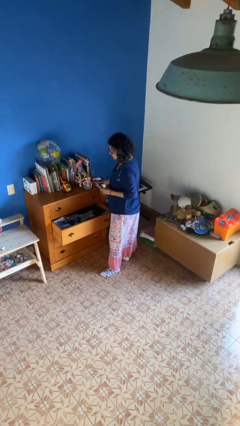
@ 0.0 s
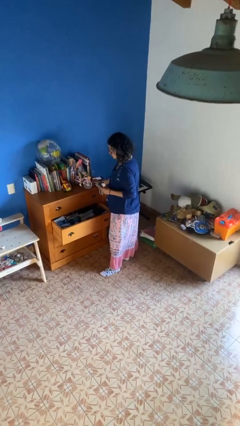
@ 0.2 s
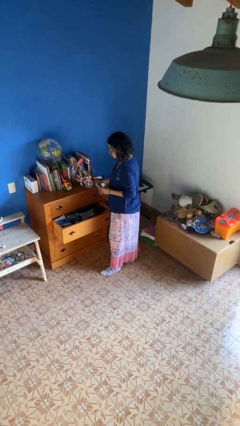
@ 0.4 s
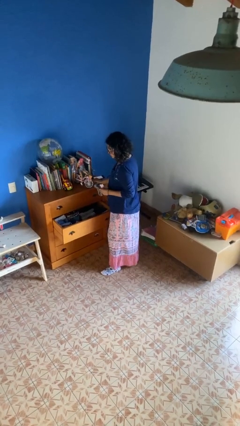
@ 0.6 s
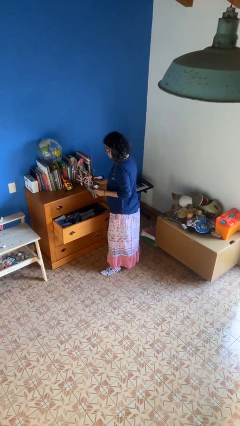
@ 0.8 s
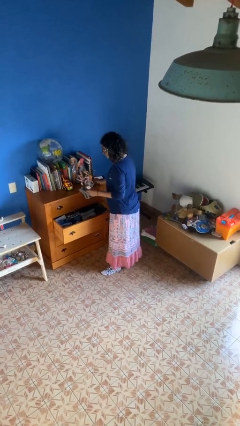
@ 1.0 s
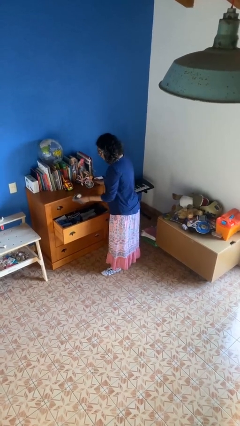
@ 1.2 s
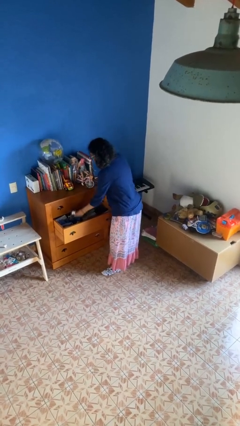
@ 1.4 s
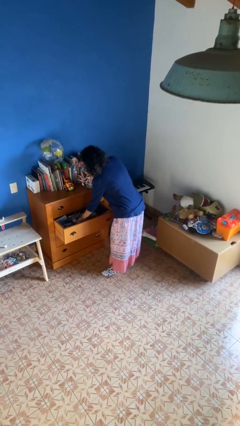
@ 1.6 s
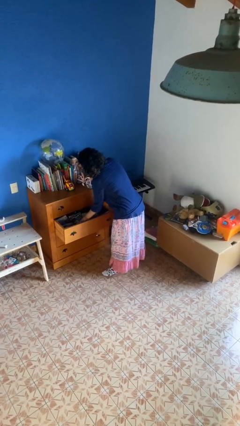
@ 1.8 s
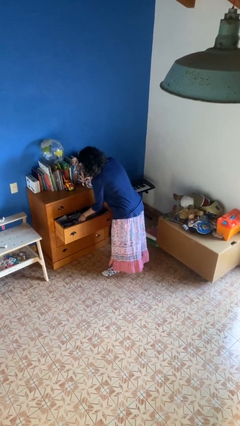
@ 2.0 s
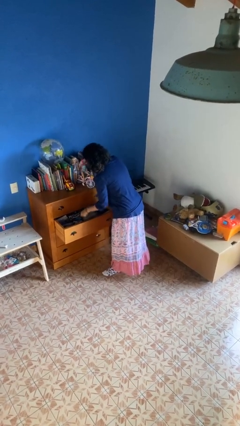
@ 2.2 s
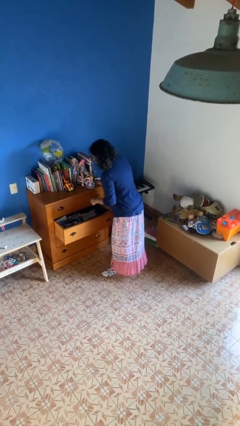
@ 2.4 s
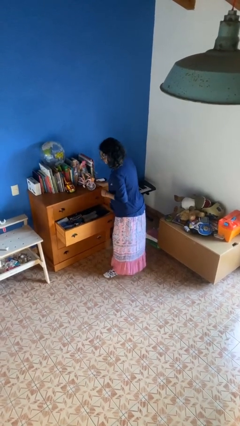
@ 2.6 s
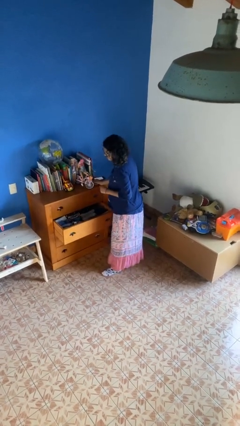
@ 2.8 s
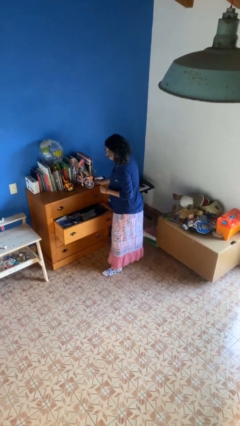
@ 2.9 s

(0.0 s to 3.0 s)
person puts clothes into dresser

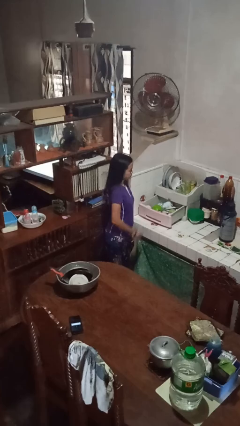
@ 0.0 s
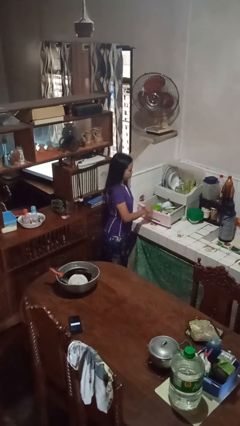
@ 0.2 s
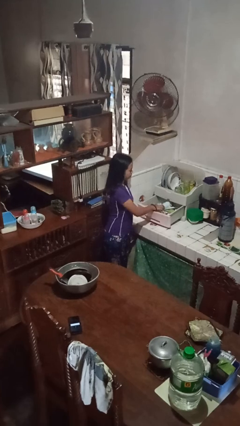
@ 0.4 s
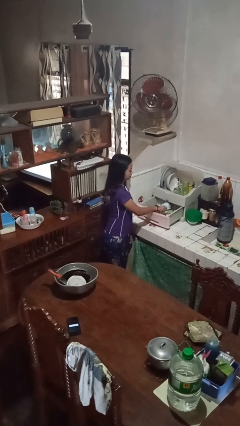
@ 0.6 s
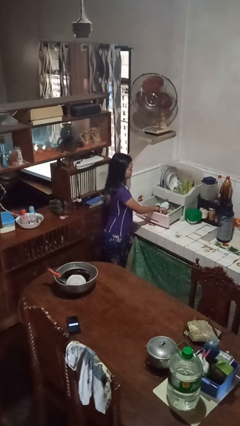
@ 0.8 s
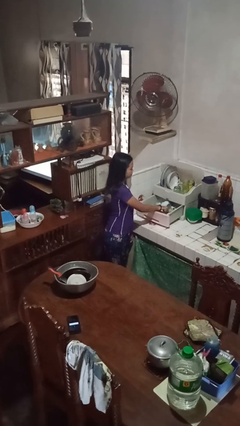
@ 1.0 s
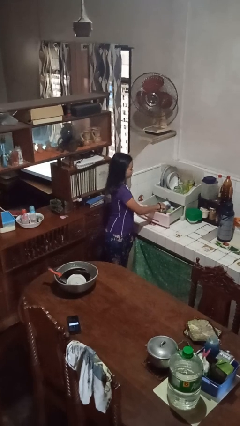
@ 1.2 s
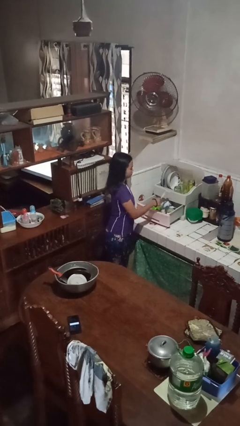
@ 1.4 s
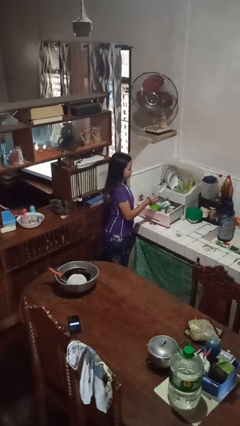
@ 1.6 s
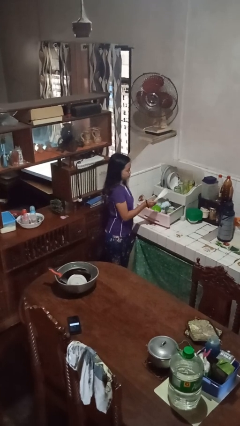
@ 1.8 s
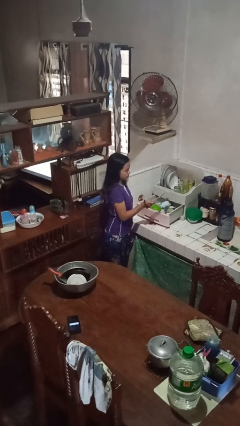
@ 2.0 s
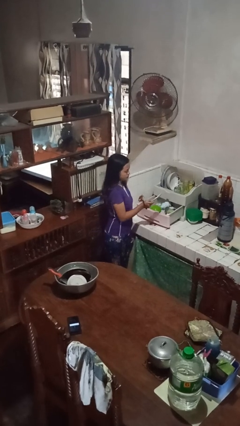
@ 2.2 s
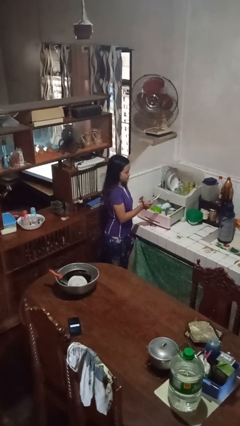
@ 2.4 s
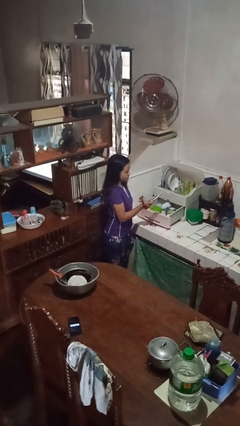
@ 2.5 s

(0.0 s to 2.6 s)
person takes object from kitchen drawer

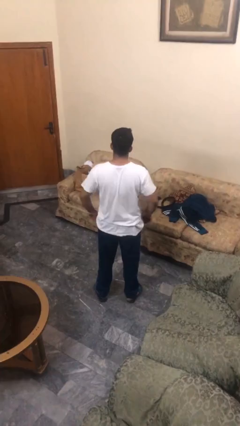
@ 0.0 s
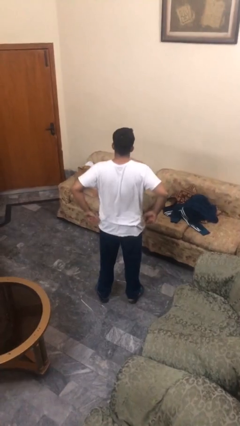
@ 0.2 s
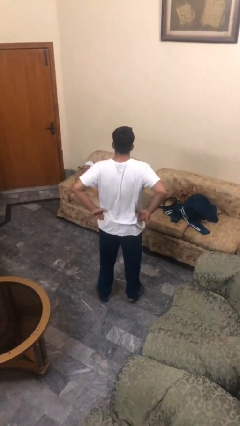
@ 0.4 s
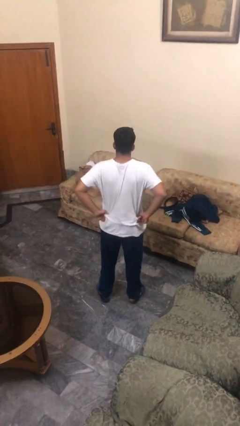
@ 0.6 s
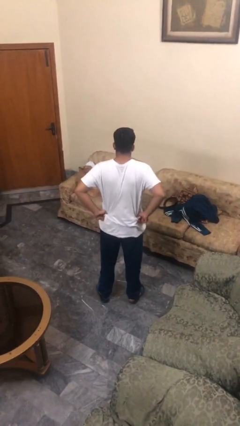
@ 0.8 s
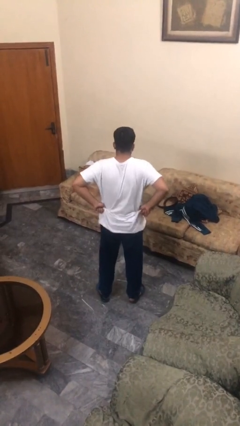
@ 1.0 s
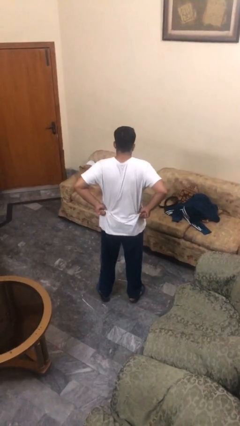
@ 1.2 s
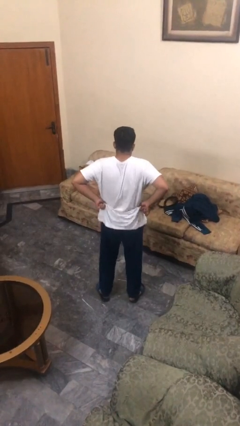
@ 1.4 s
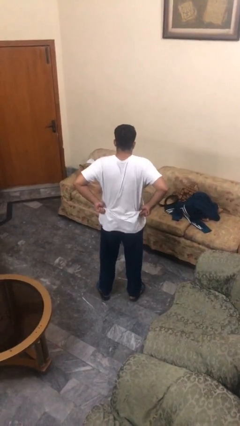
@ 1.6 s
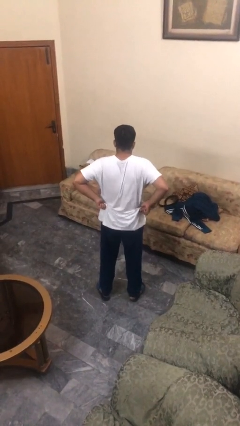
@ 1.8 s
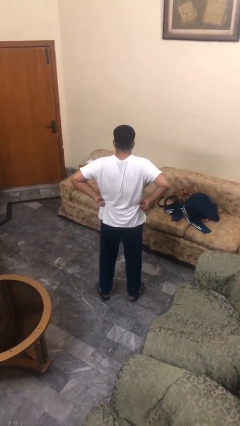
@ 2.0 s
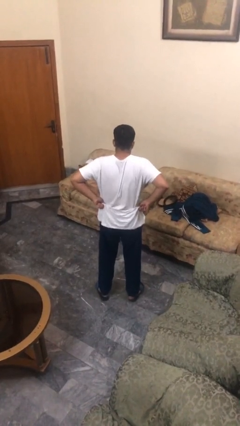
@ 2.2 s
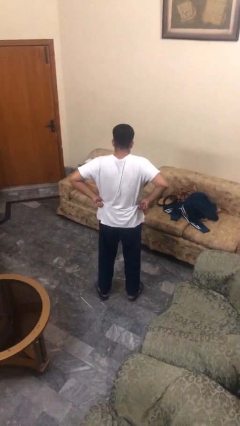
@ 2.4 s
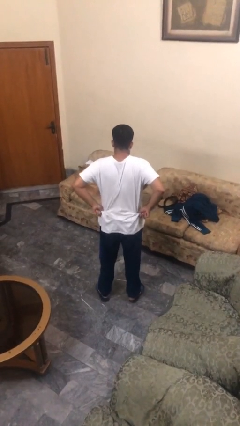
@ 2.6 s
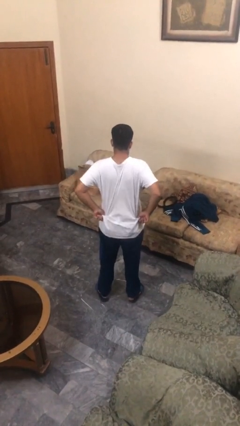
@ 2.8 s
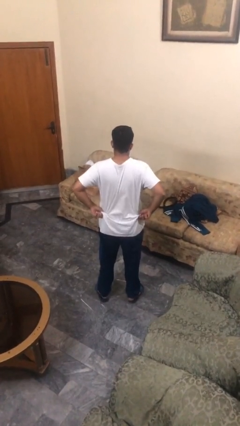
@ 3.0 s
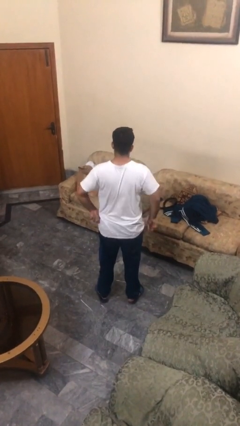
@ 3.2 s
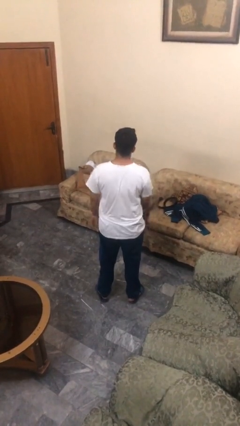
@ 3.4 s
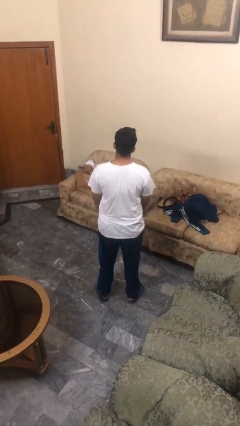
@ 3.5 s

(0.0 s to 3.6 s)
person hikes up pants

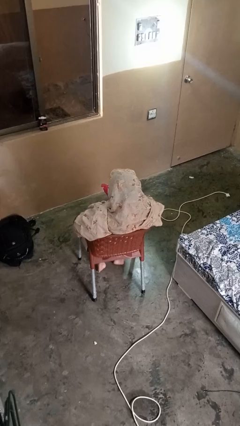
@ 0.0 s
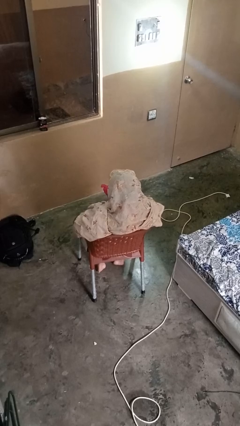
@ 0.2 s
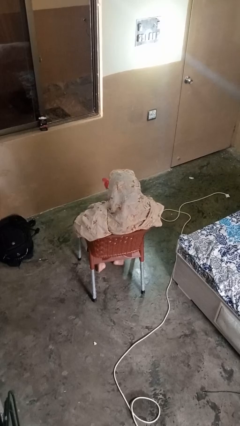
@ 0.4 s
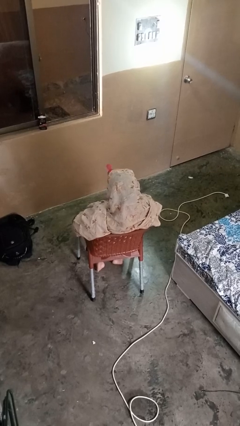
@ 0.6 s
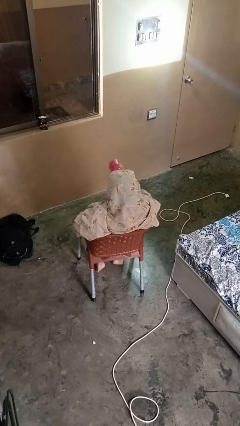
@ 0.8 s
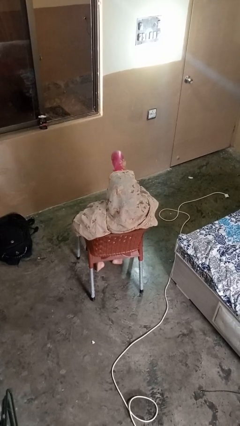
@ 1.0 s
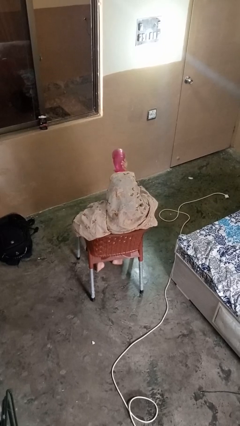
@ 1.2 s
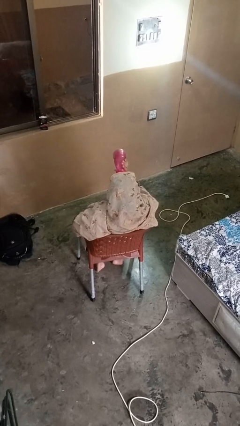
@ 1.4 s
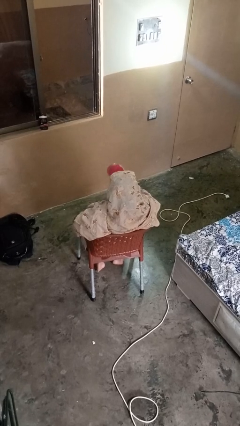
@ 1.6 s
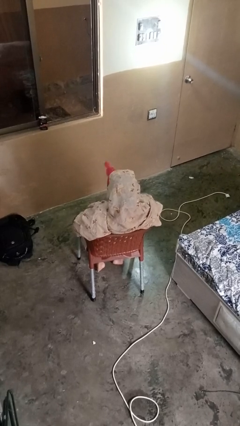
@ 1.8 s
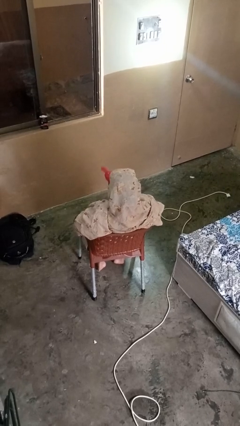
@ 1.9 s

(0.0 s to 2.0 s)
person drinks from bottle

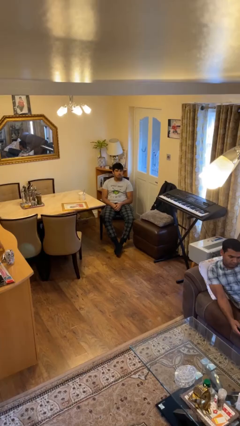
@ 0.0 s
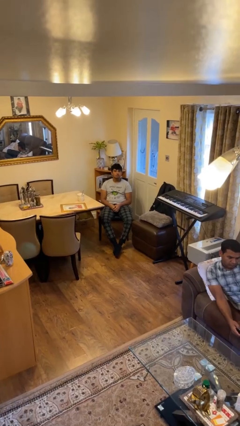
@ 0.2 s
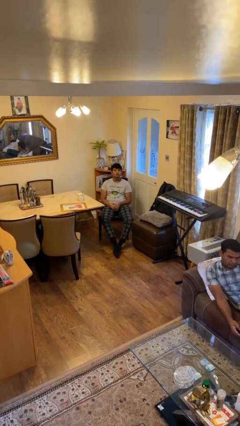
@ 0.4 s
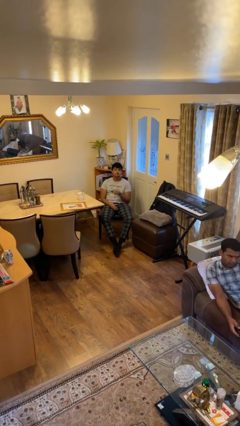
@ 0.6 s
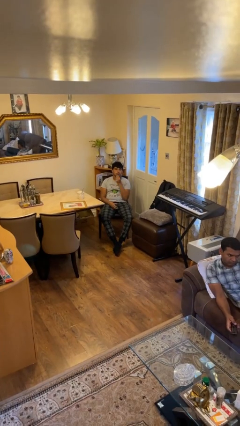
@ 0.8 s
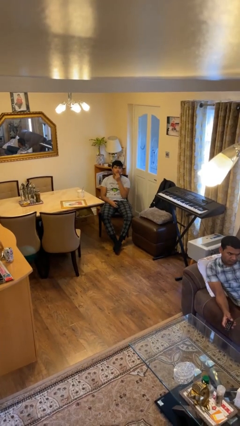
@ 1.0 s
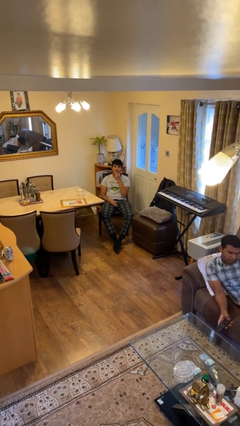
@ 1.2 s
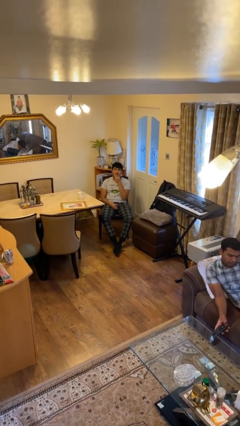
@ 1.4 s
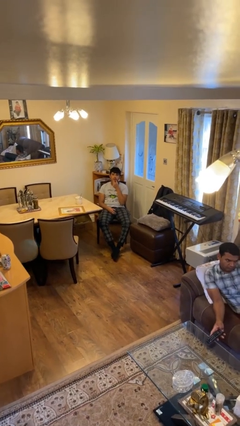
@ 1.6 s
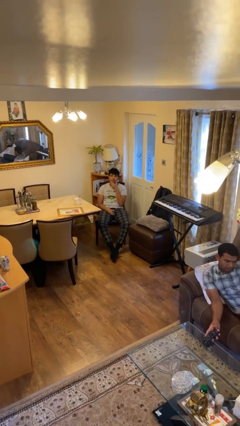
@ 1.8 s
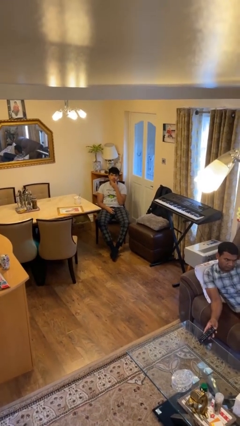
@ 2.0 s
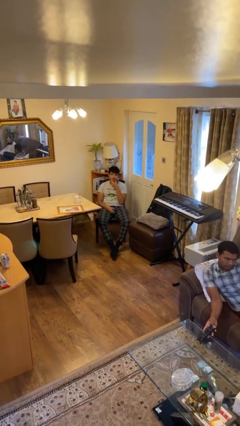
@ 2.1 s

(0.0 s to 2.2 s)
person strokes chin

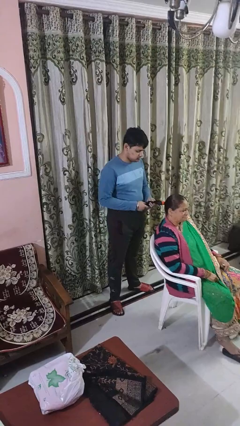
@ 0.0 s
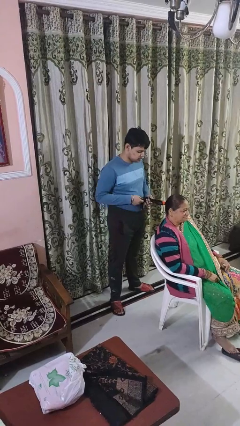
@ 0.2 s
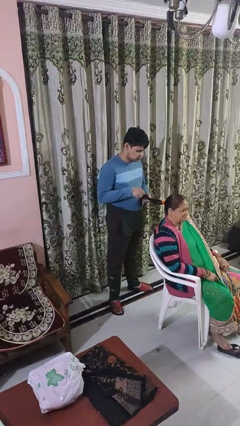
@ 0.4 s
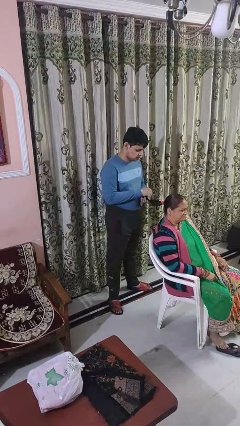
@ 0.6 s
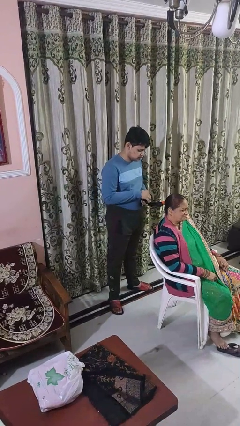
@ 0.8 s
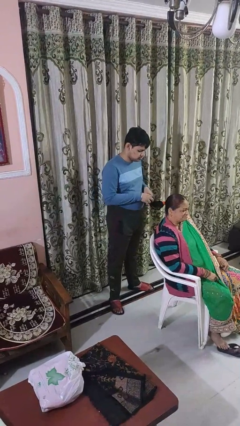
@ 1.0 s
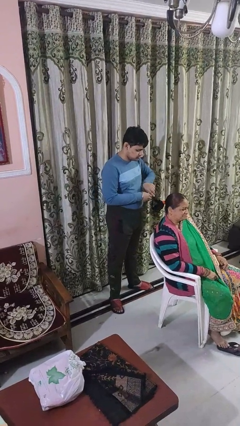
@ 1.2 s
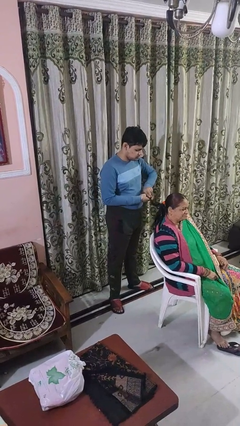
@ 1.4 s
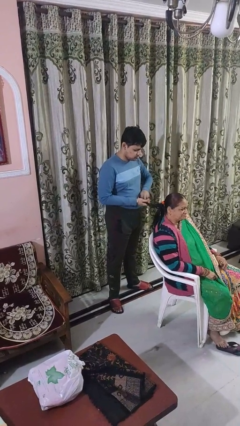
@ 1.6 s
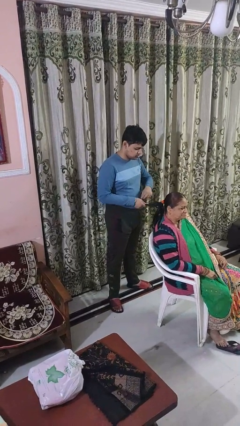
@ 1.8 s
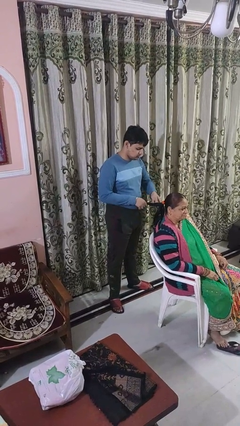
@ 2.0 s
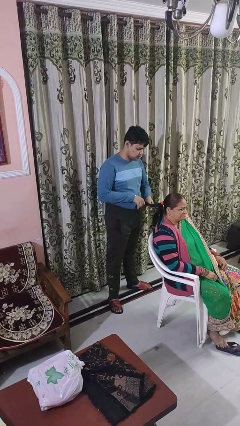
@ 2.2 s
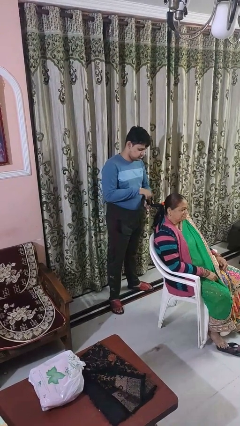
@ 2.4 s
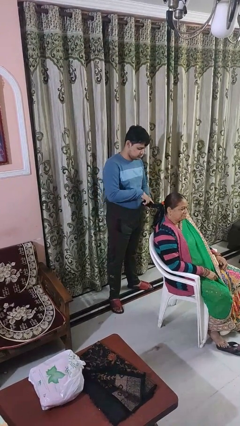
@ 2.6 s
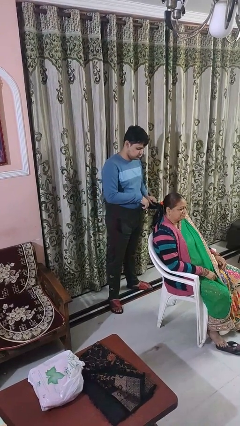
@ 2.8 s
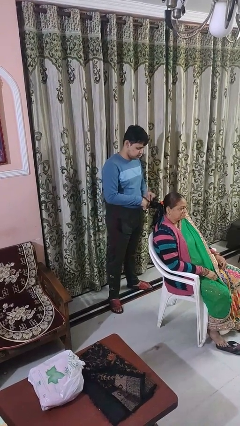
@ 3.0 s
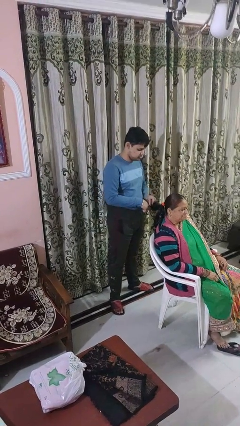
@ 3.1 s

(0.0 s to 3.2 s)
person braids hair of person

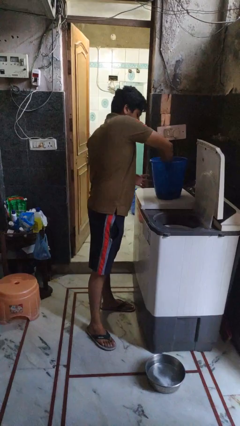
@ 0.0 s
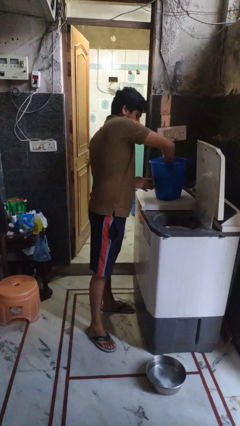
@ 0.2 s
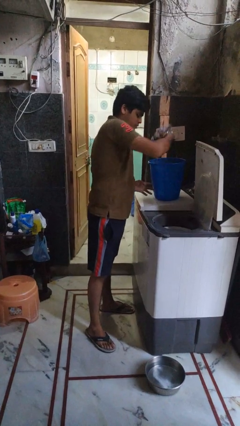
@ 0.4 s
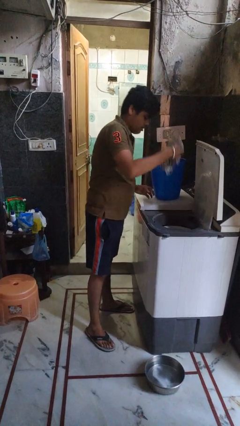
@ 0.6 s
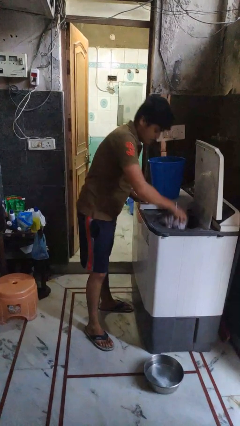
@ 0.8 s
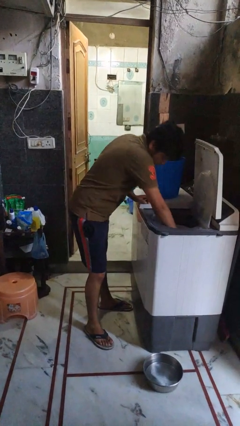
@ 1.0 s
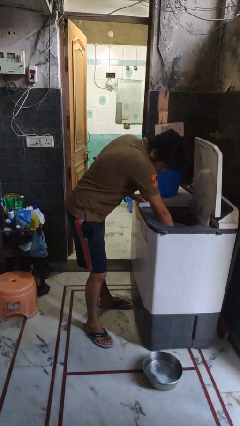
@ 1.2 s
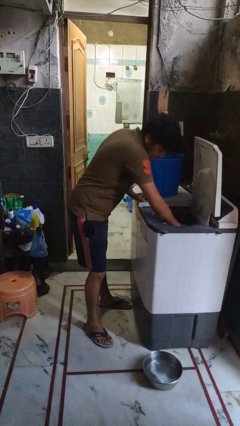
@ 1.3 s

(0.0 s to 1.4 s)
person loads dryer
